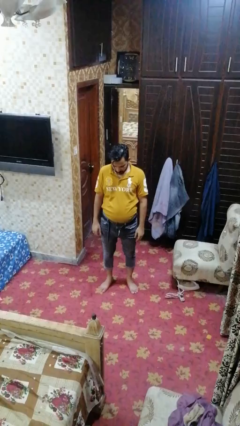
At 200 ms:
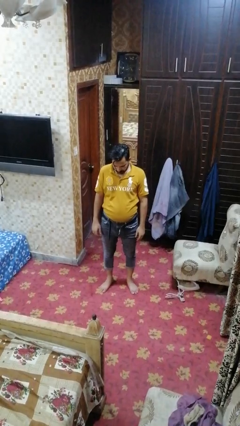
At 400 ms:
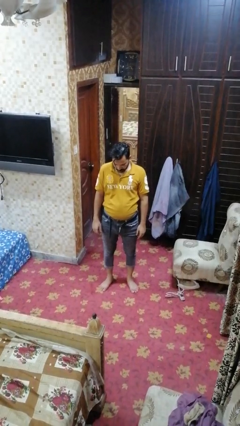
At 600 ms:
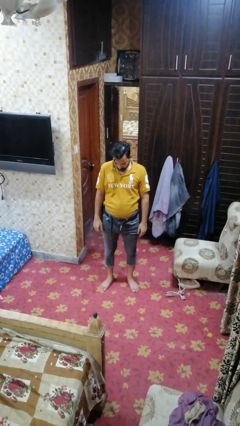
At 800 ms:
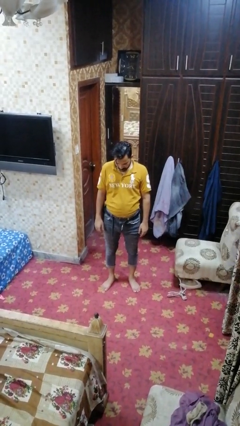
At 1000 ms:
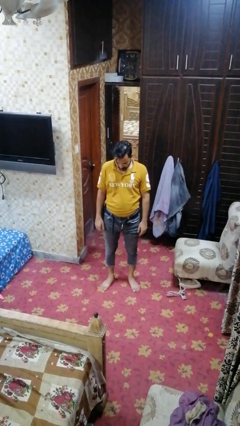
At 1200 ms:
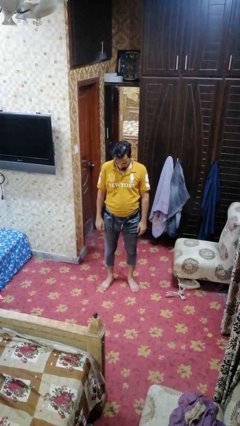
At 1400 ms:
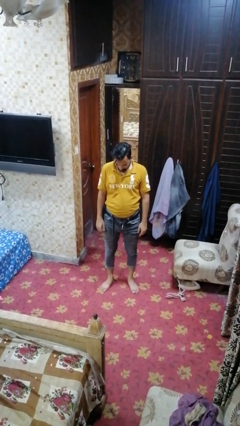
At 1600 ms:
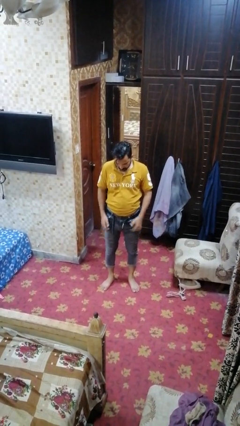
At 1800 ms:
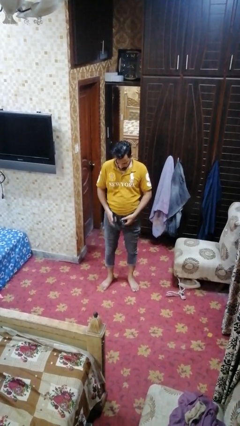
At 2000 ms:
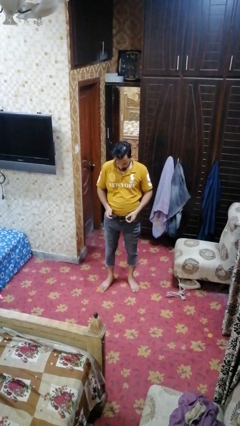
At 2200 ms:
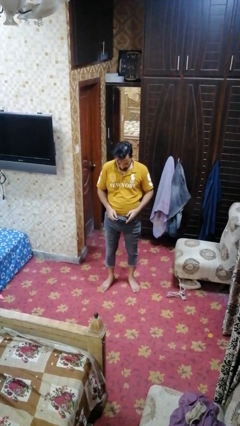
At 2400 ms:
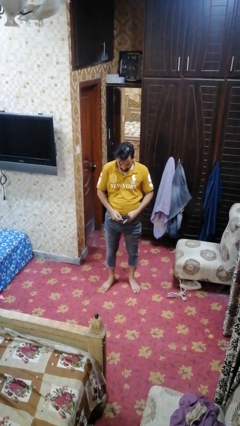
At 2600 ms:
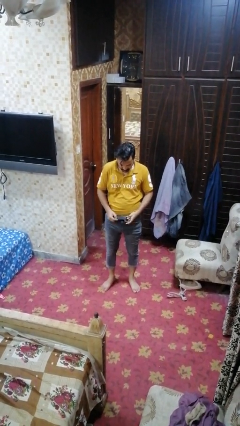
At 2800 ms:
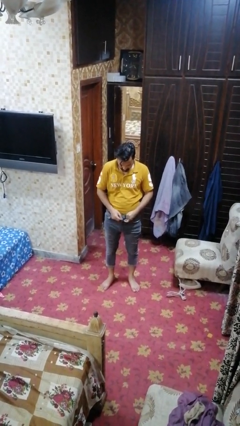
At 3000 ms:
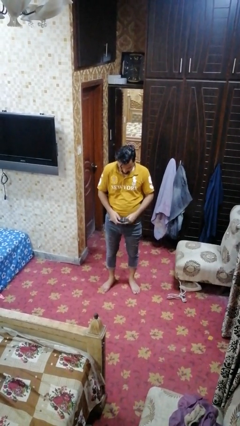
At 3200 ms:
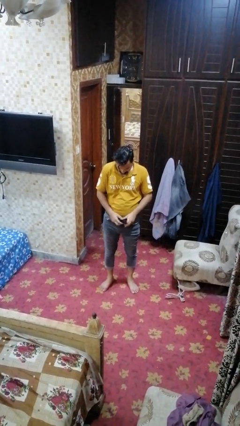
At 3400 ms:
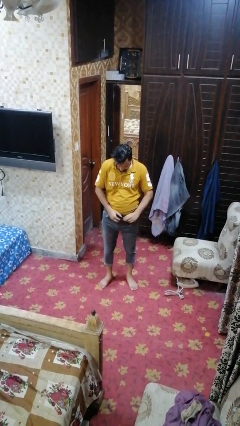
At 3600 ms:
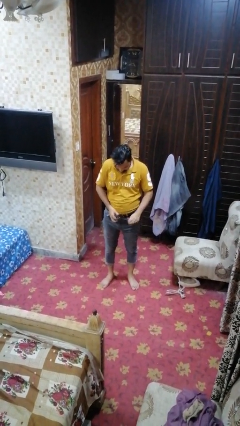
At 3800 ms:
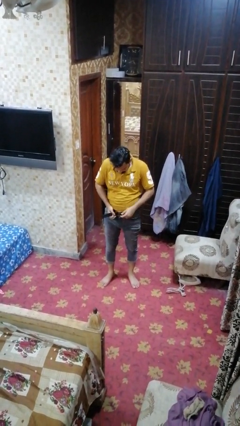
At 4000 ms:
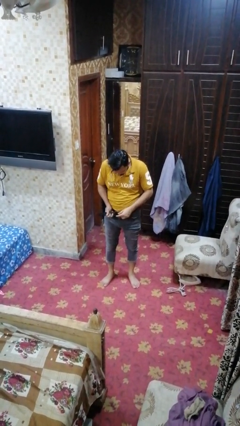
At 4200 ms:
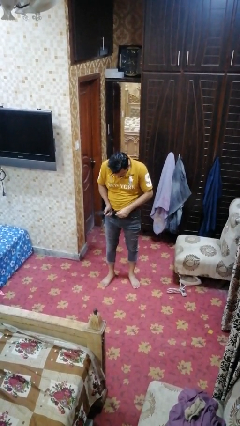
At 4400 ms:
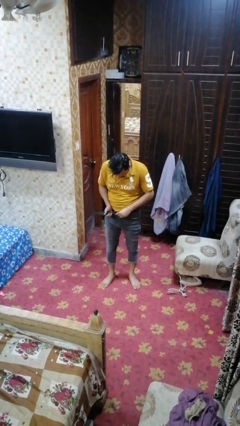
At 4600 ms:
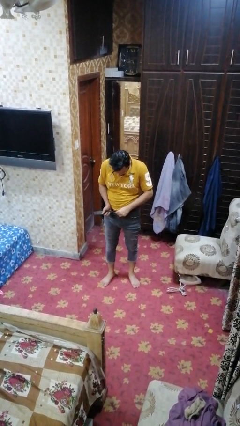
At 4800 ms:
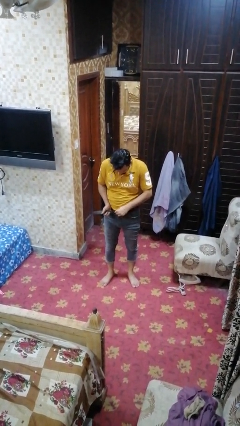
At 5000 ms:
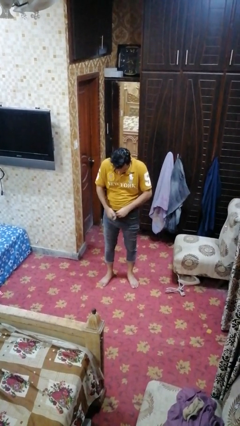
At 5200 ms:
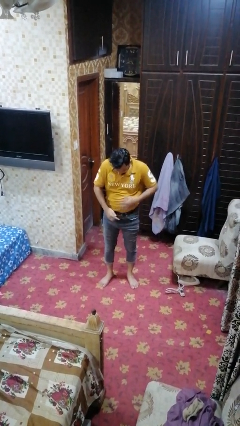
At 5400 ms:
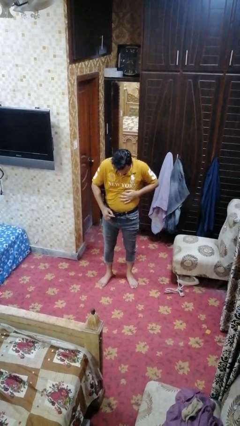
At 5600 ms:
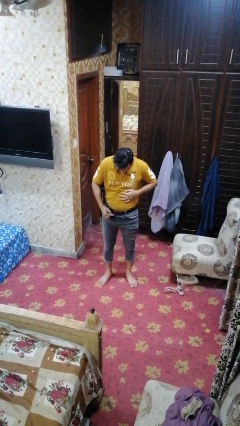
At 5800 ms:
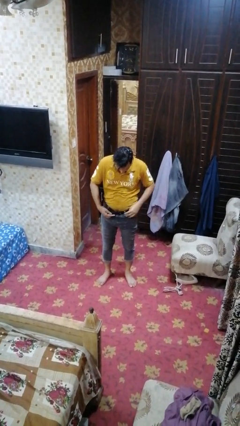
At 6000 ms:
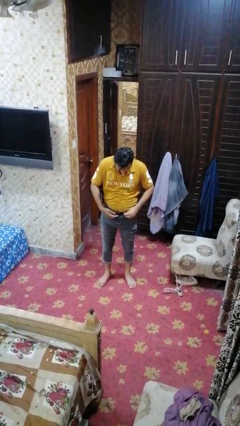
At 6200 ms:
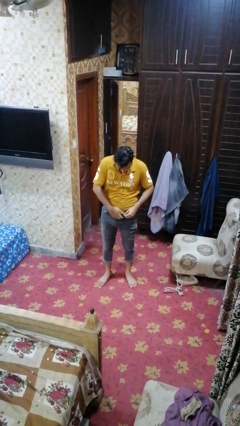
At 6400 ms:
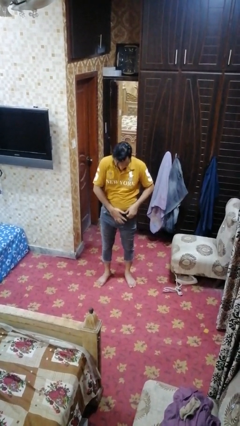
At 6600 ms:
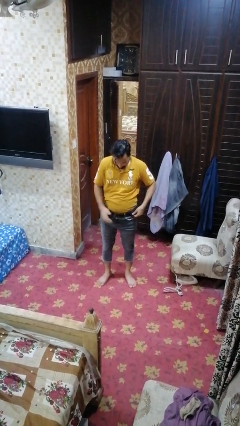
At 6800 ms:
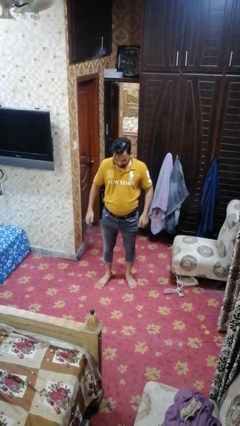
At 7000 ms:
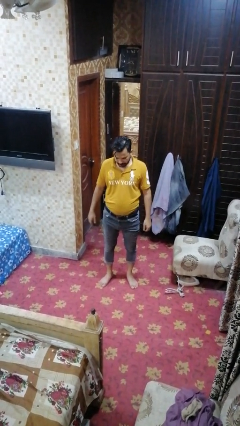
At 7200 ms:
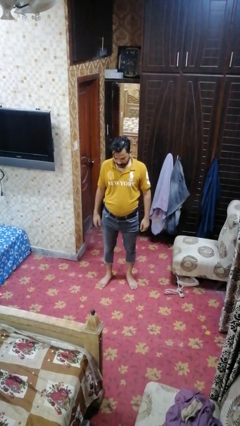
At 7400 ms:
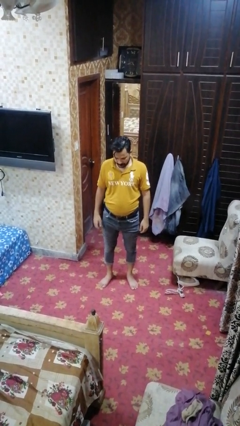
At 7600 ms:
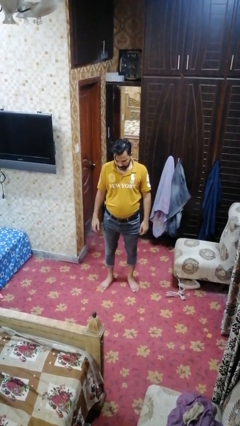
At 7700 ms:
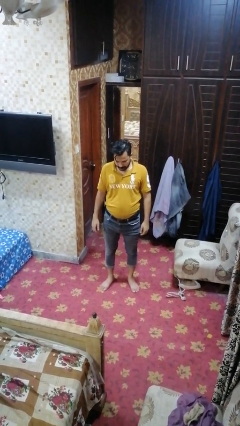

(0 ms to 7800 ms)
person puts on belt

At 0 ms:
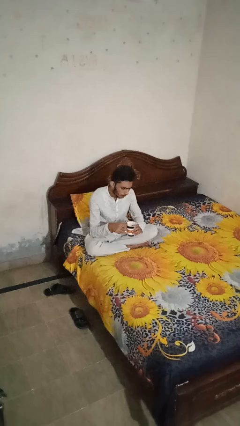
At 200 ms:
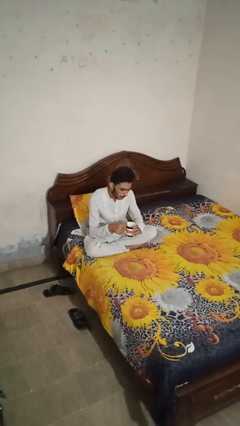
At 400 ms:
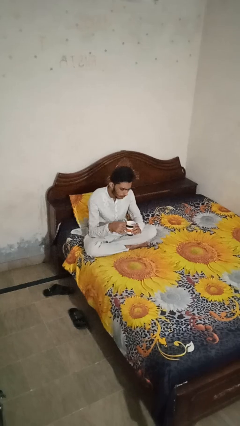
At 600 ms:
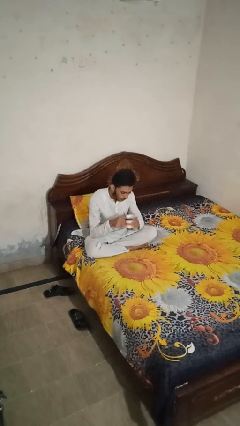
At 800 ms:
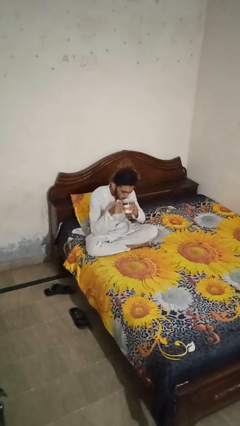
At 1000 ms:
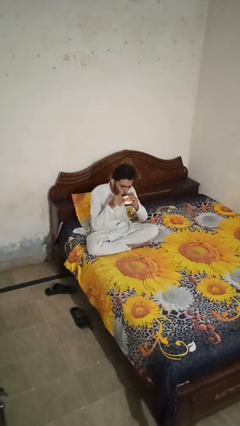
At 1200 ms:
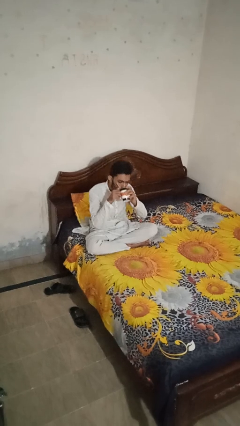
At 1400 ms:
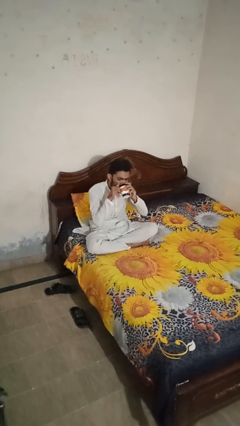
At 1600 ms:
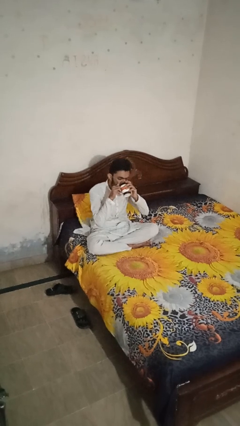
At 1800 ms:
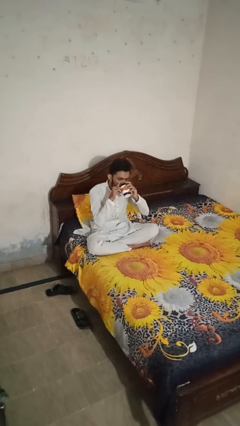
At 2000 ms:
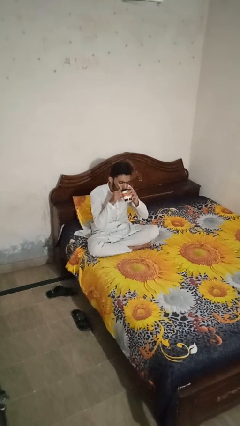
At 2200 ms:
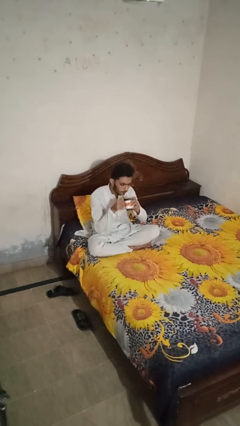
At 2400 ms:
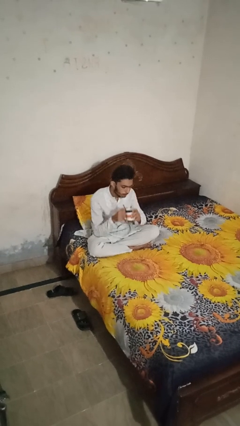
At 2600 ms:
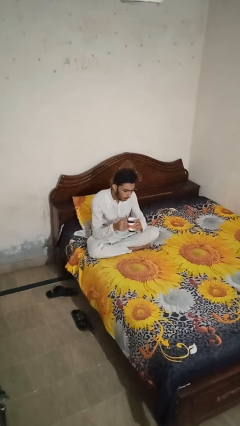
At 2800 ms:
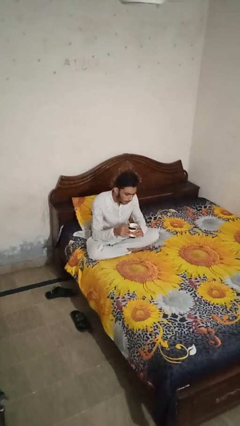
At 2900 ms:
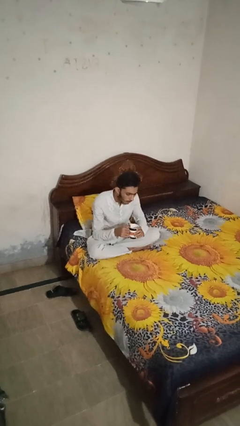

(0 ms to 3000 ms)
person drinks from mug

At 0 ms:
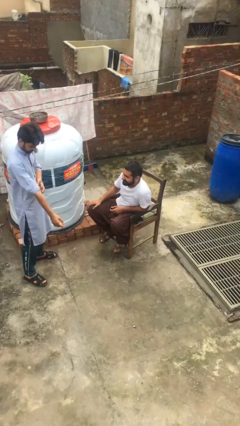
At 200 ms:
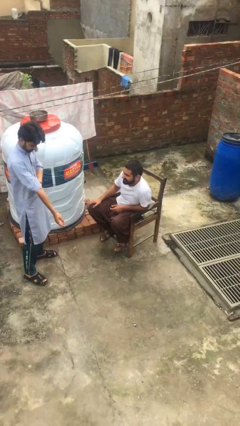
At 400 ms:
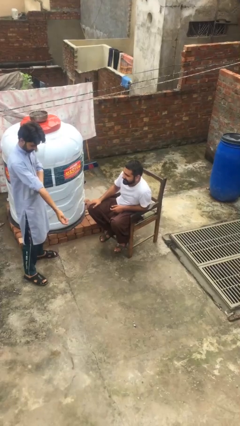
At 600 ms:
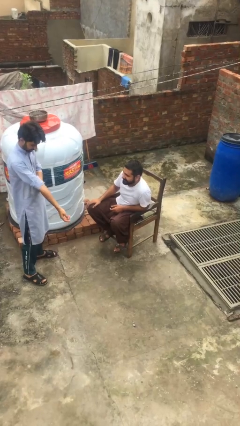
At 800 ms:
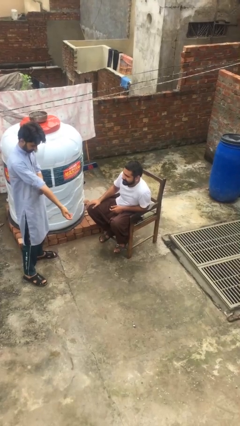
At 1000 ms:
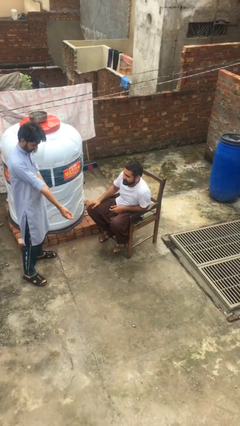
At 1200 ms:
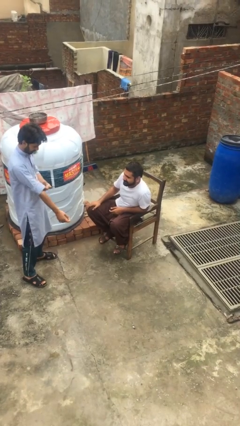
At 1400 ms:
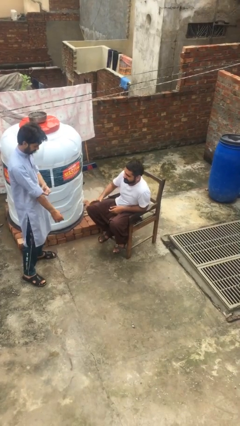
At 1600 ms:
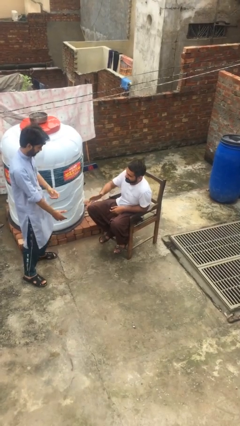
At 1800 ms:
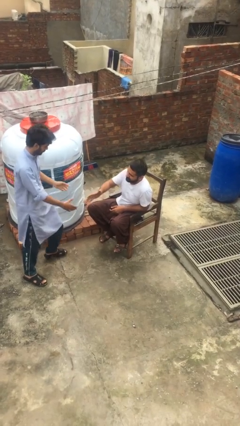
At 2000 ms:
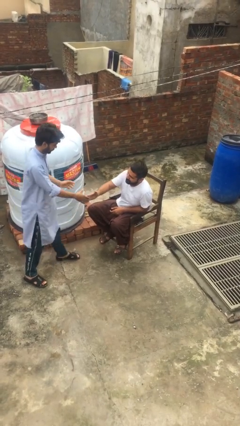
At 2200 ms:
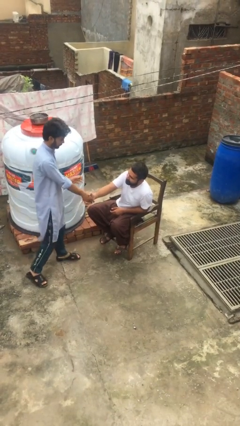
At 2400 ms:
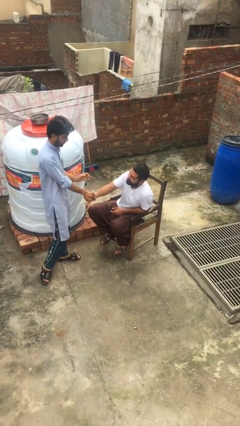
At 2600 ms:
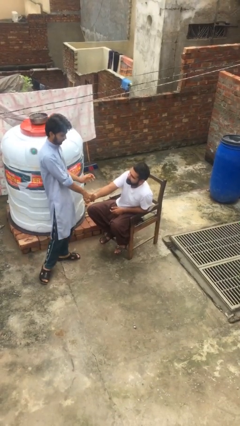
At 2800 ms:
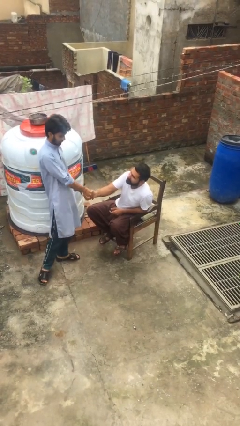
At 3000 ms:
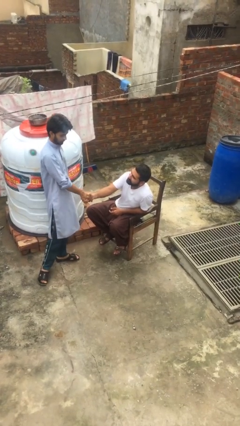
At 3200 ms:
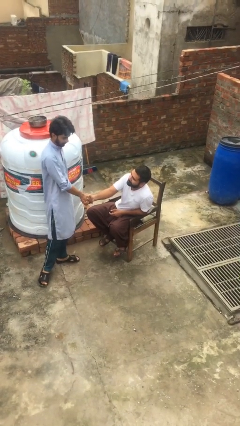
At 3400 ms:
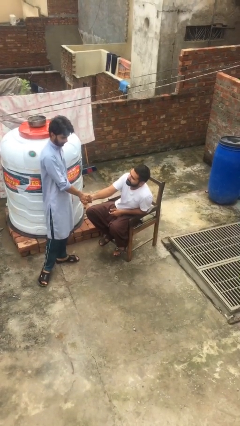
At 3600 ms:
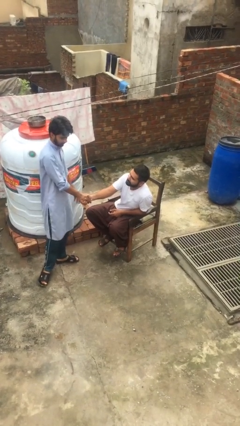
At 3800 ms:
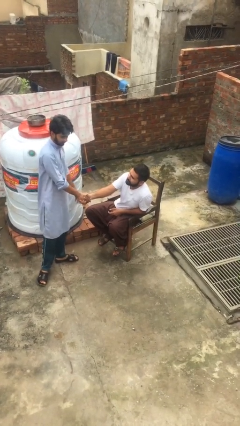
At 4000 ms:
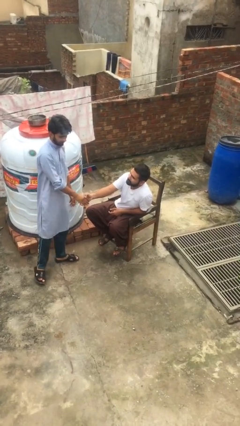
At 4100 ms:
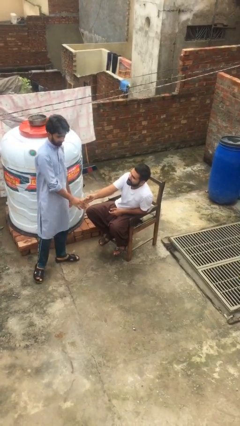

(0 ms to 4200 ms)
person shakes hand

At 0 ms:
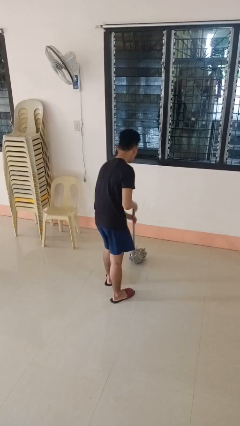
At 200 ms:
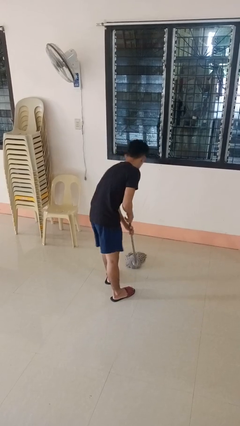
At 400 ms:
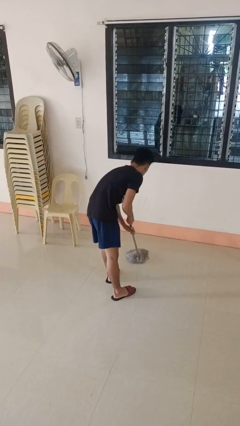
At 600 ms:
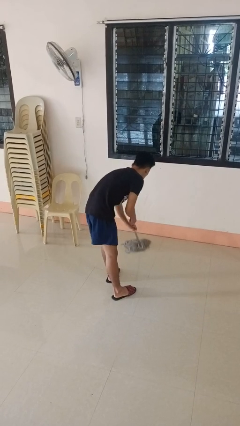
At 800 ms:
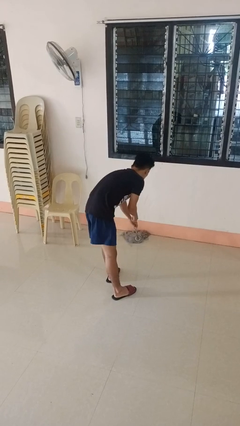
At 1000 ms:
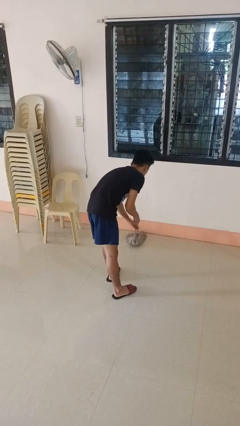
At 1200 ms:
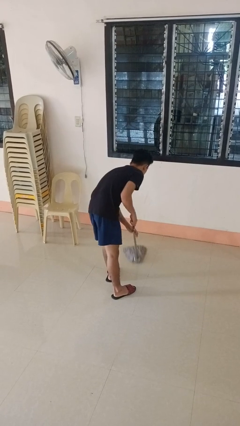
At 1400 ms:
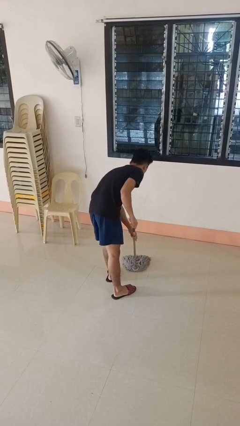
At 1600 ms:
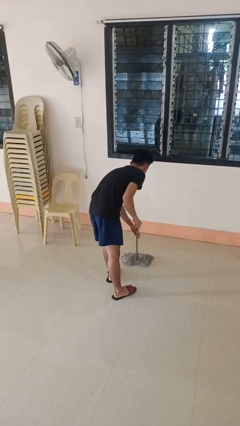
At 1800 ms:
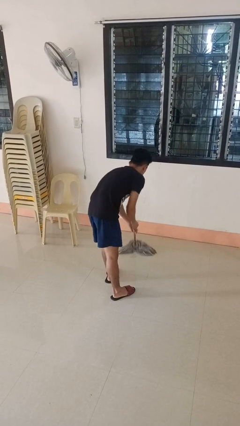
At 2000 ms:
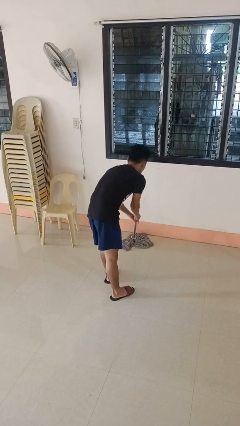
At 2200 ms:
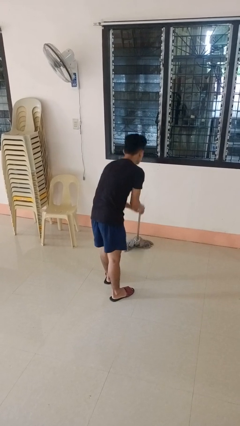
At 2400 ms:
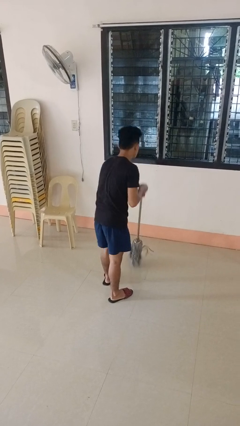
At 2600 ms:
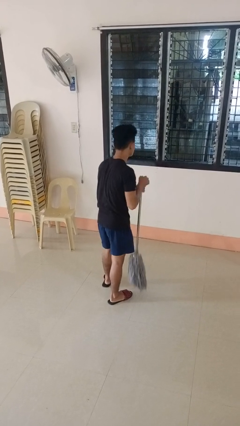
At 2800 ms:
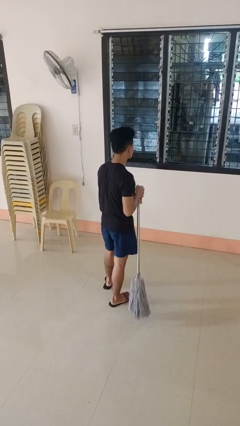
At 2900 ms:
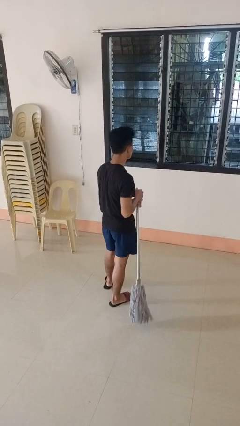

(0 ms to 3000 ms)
person mops
